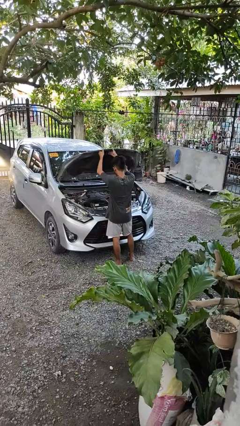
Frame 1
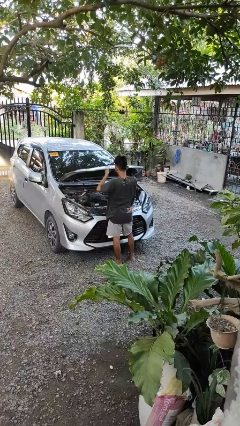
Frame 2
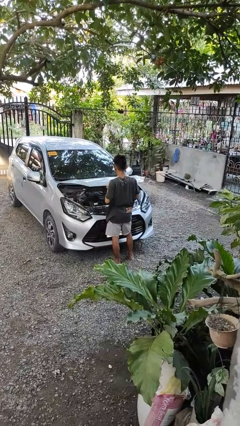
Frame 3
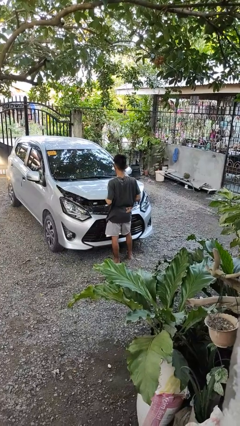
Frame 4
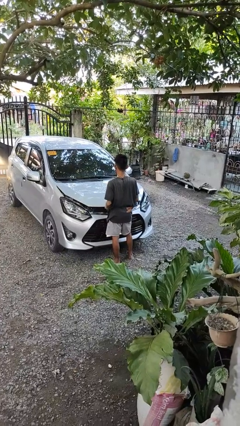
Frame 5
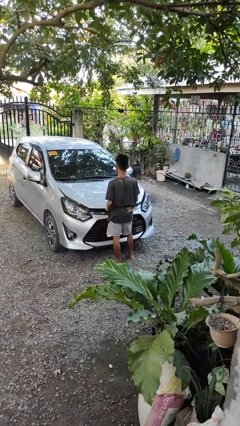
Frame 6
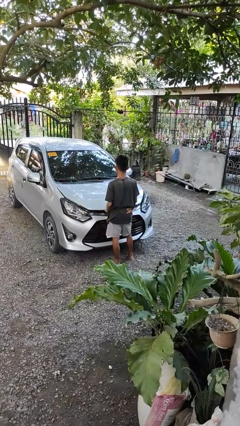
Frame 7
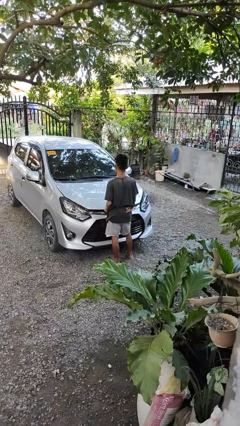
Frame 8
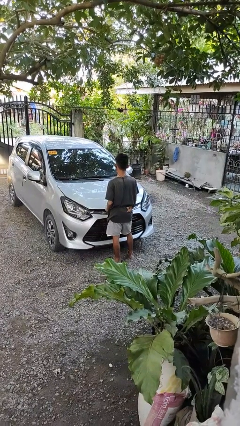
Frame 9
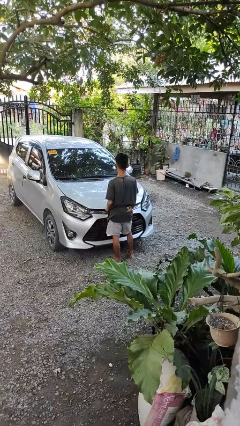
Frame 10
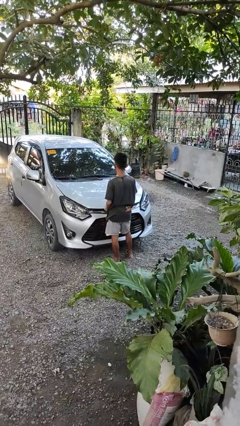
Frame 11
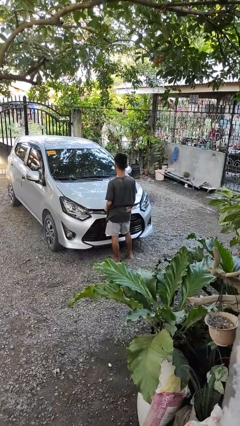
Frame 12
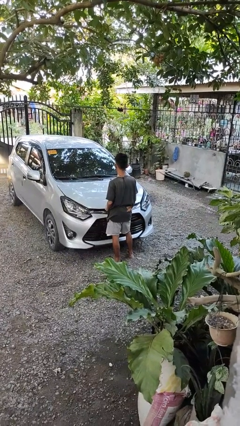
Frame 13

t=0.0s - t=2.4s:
person closes car hood

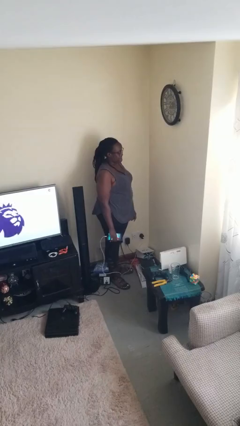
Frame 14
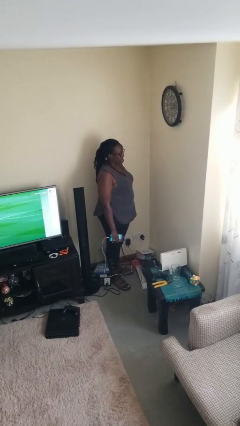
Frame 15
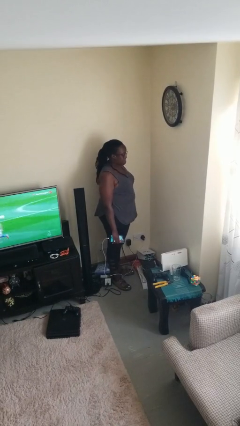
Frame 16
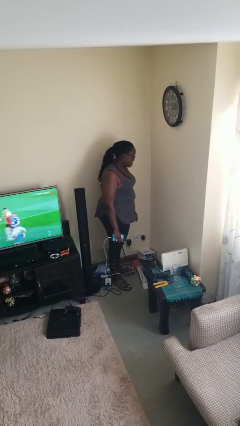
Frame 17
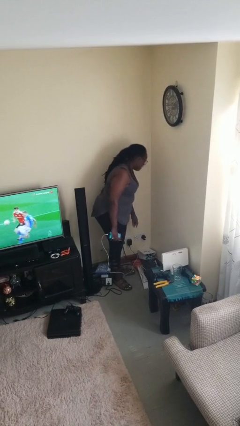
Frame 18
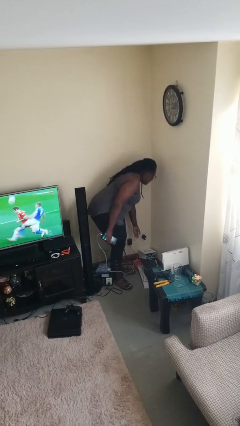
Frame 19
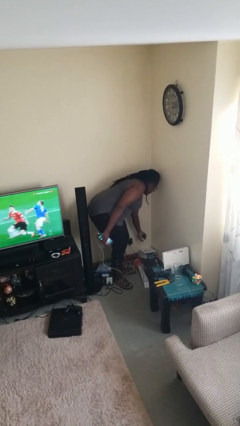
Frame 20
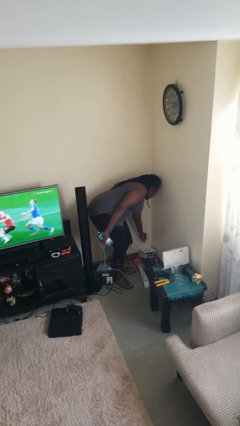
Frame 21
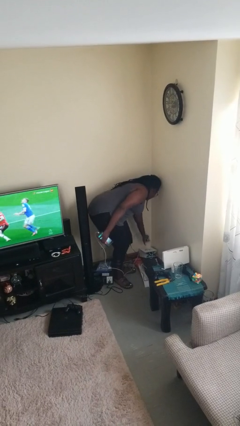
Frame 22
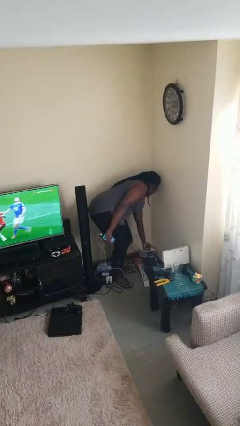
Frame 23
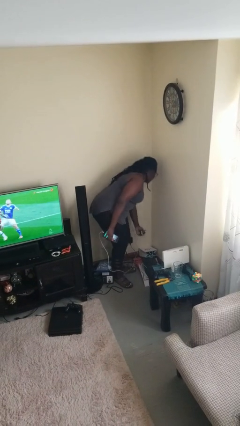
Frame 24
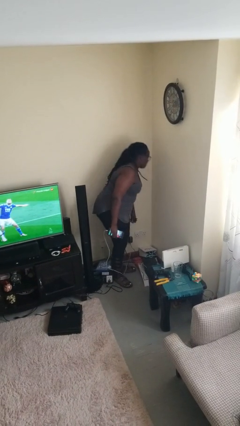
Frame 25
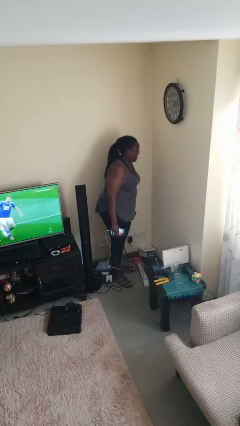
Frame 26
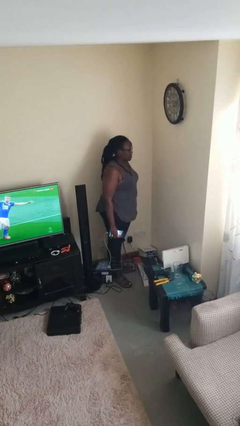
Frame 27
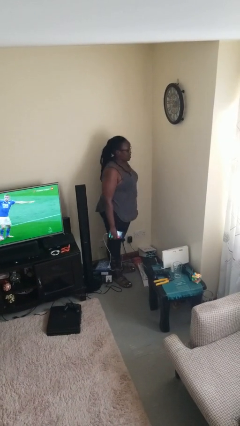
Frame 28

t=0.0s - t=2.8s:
person unplugs from electrical socket

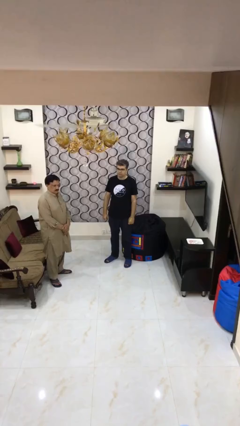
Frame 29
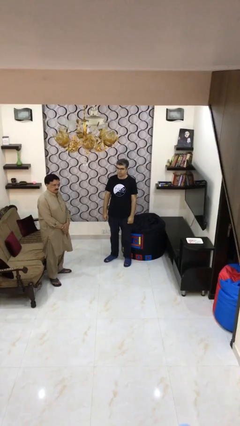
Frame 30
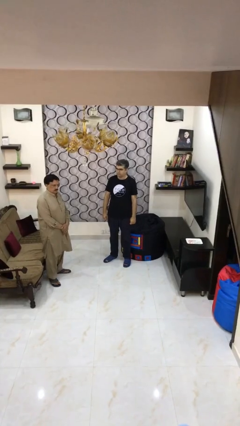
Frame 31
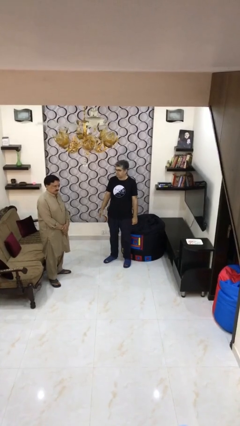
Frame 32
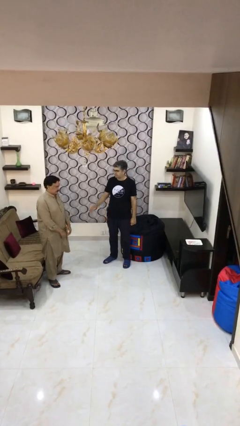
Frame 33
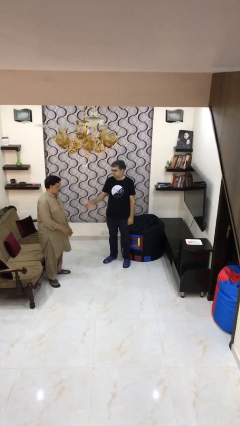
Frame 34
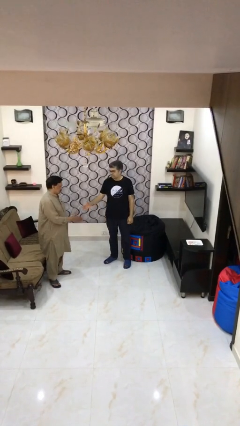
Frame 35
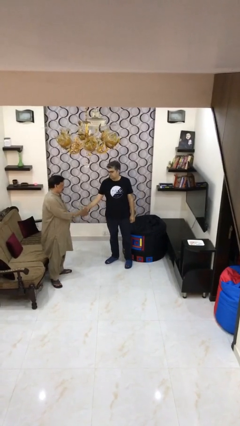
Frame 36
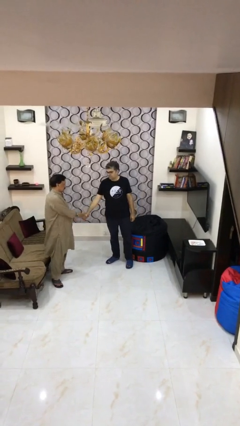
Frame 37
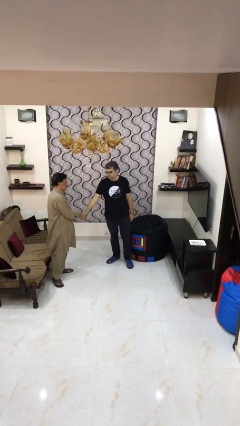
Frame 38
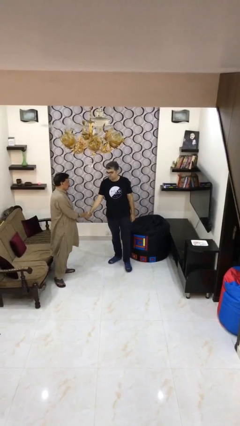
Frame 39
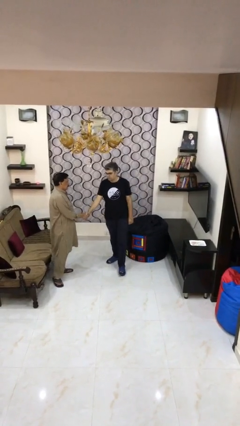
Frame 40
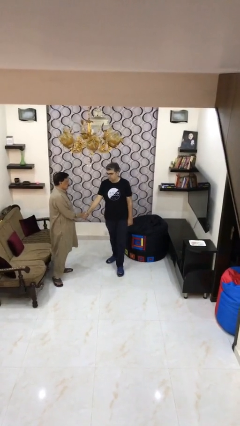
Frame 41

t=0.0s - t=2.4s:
person shakes hand

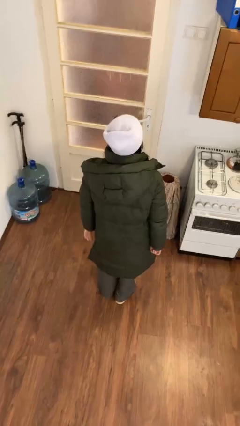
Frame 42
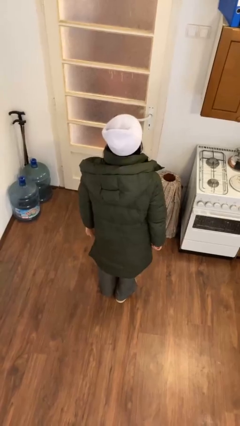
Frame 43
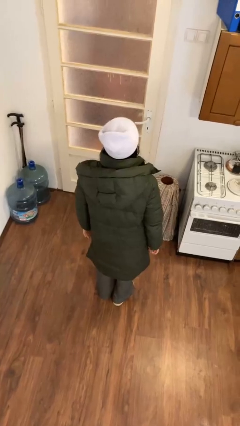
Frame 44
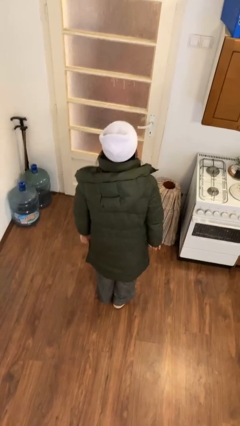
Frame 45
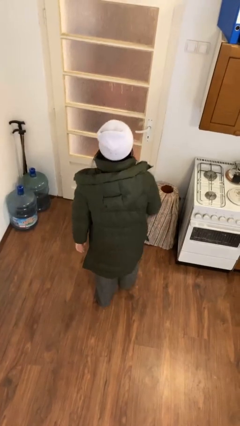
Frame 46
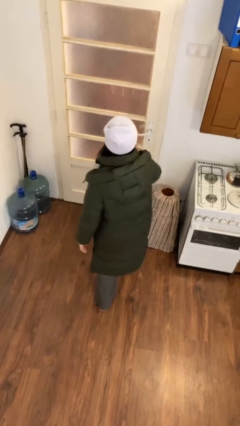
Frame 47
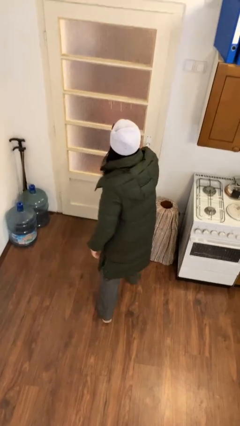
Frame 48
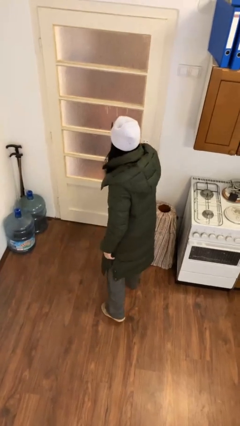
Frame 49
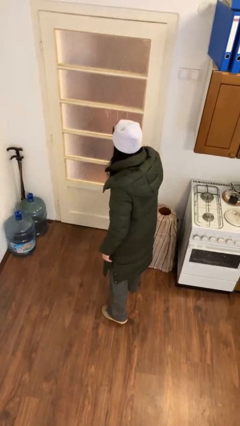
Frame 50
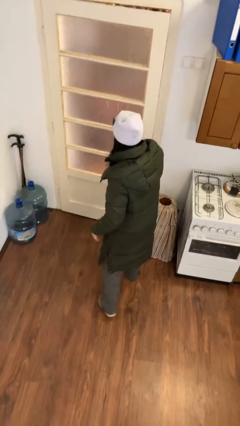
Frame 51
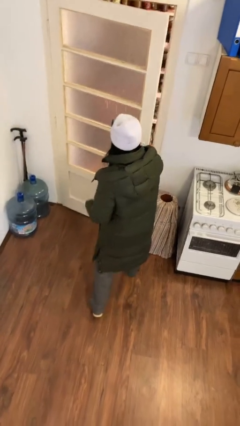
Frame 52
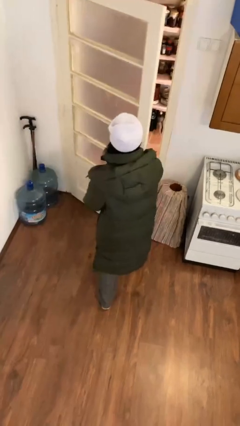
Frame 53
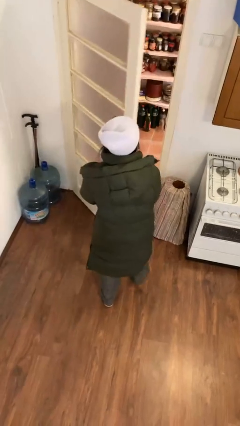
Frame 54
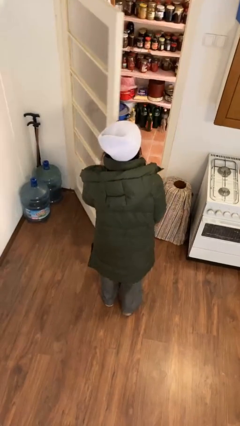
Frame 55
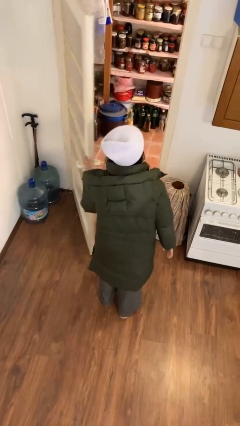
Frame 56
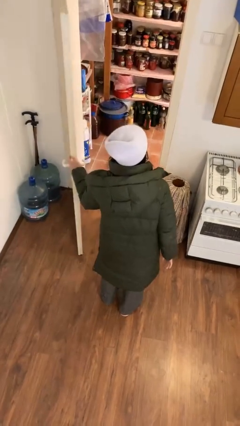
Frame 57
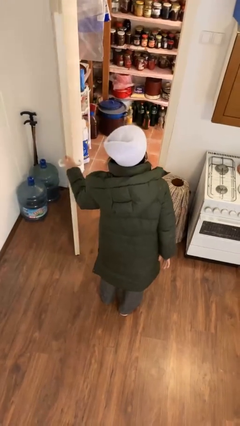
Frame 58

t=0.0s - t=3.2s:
person opens facility door

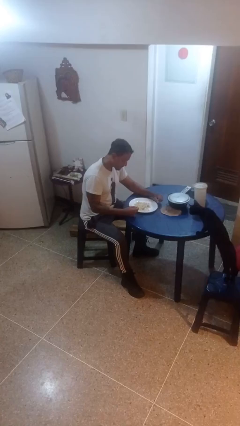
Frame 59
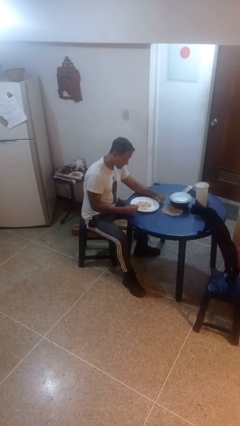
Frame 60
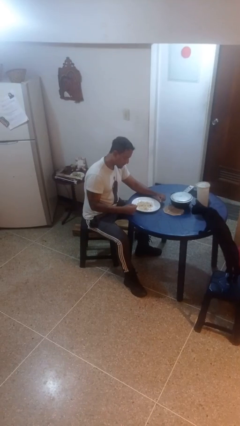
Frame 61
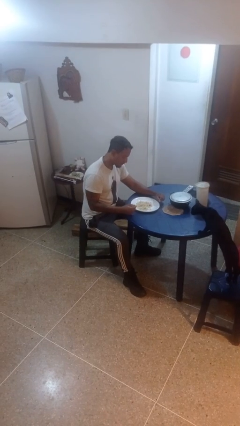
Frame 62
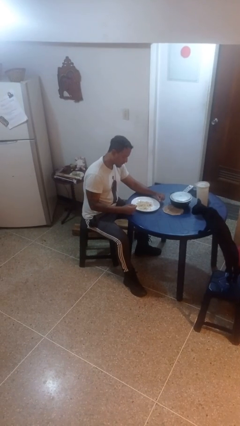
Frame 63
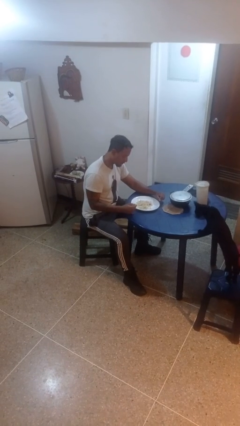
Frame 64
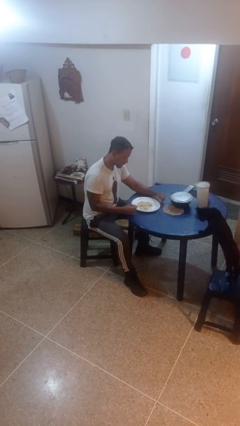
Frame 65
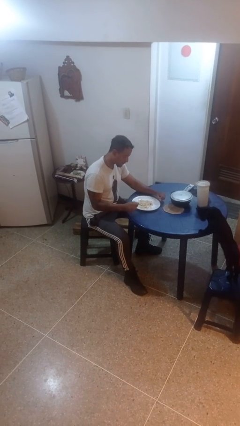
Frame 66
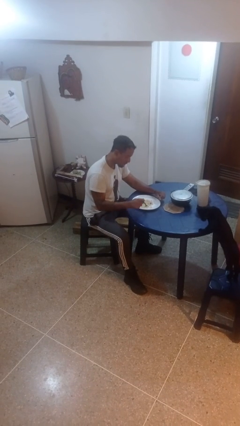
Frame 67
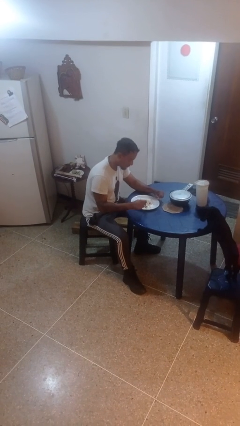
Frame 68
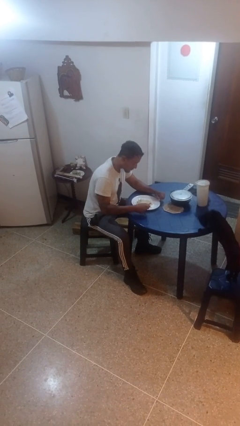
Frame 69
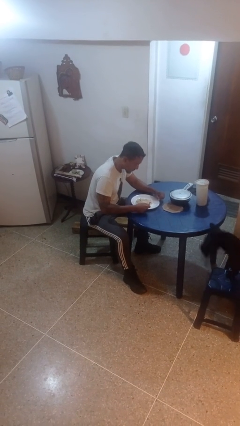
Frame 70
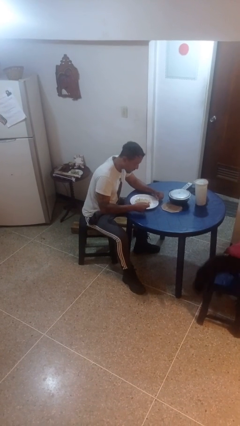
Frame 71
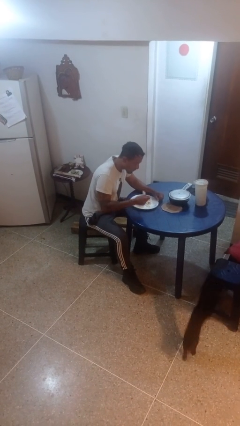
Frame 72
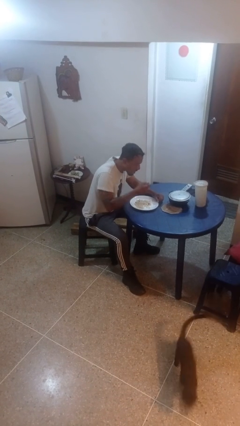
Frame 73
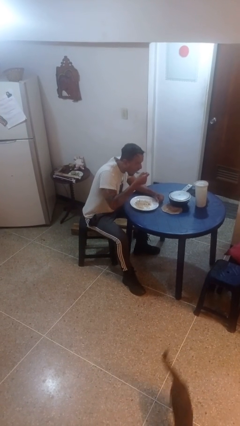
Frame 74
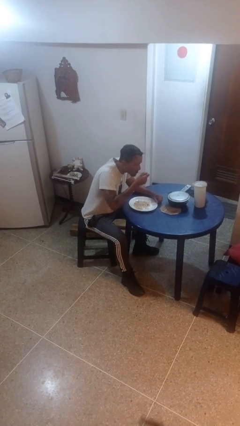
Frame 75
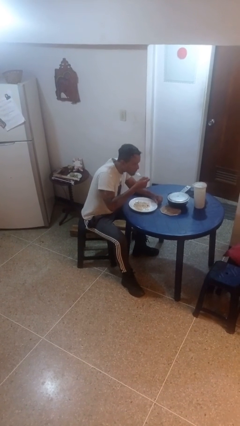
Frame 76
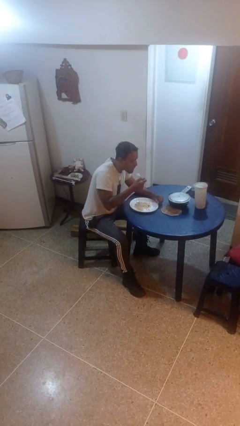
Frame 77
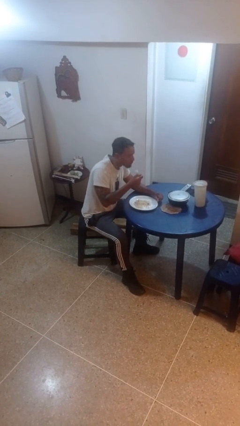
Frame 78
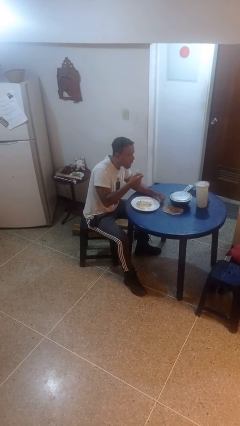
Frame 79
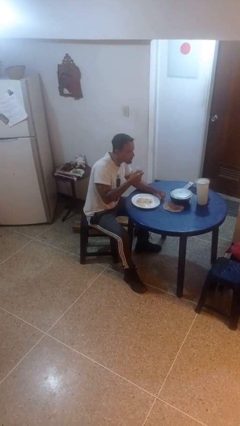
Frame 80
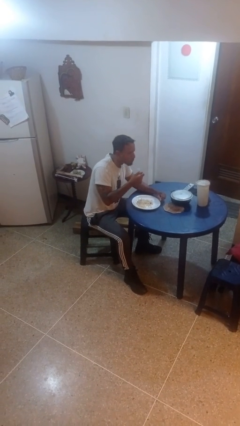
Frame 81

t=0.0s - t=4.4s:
person eats with utensil

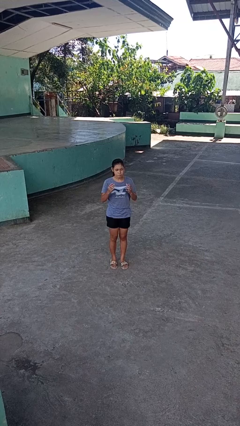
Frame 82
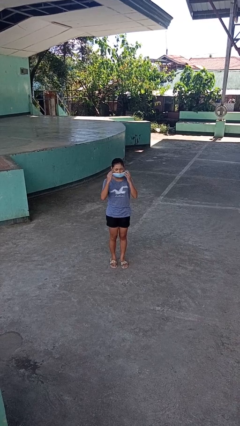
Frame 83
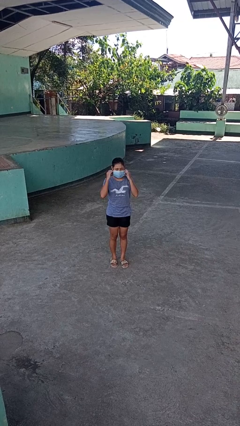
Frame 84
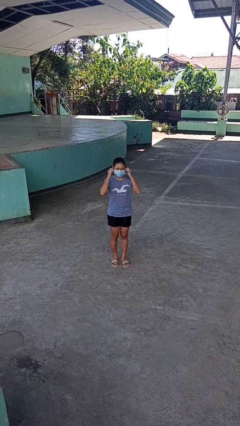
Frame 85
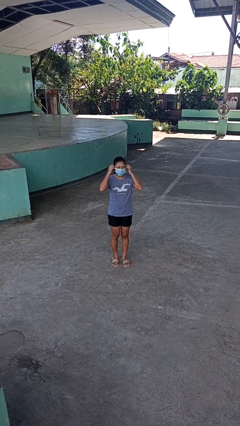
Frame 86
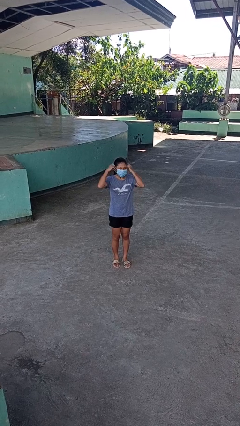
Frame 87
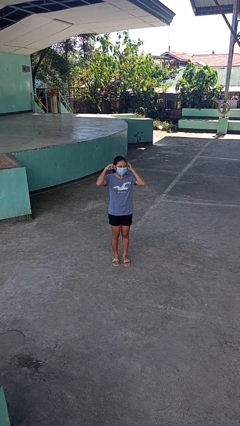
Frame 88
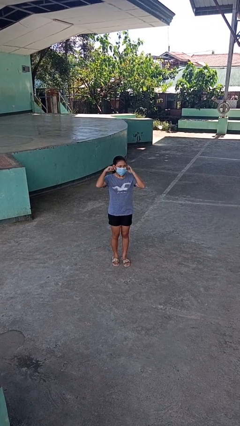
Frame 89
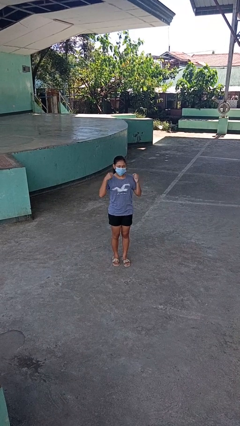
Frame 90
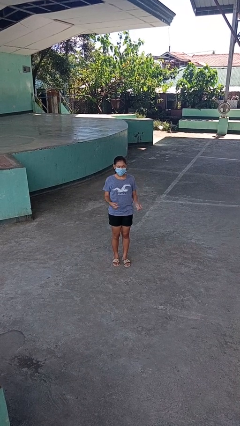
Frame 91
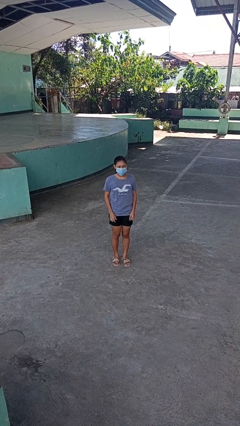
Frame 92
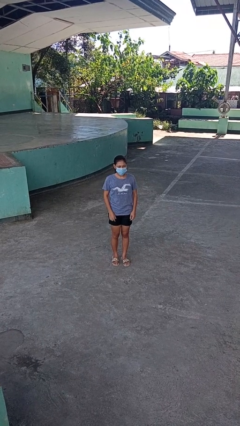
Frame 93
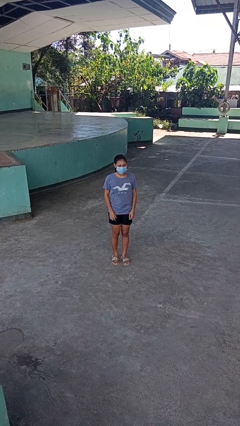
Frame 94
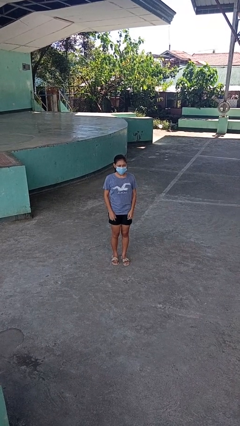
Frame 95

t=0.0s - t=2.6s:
person puts on facemask
